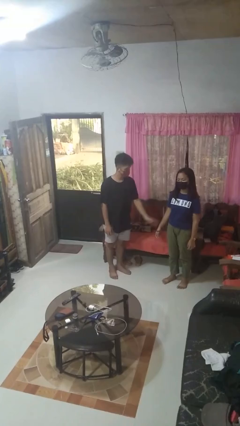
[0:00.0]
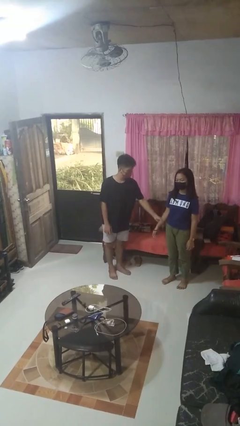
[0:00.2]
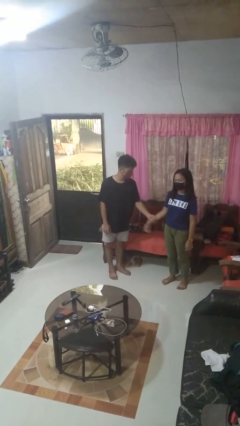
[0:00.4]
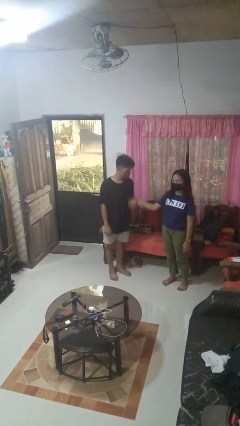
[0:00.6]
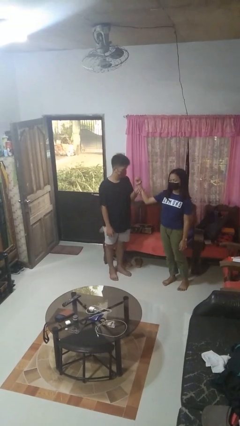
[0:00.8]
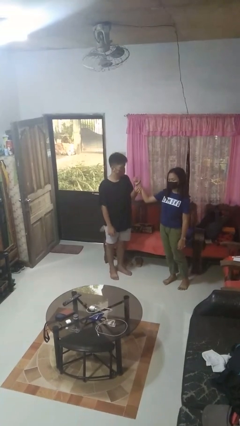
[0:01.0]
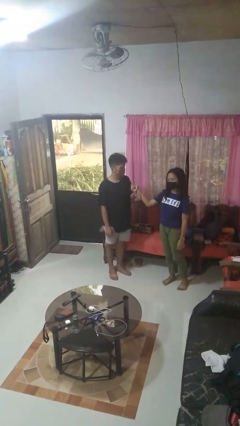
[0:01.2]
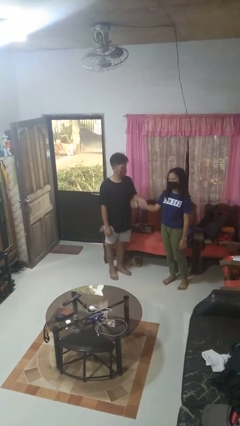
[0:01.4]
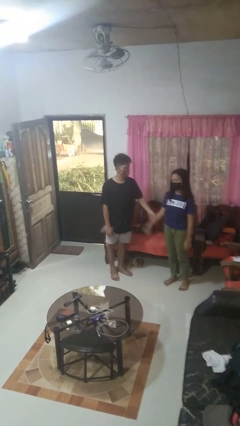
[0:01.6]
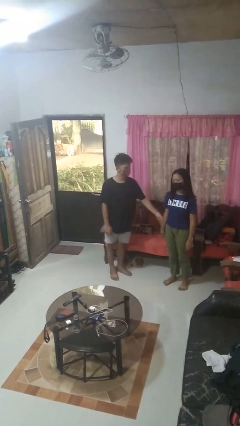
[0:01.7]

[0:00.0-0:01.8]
person grabs person by forearm

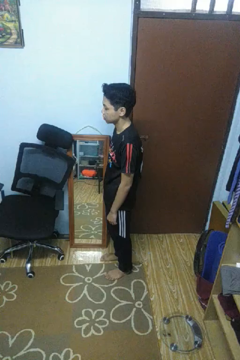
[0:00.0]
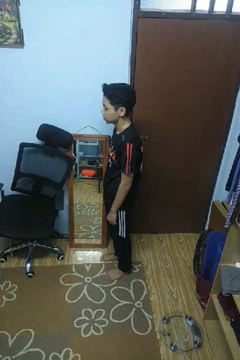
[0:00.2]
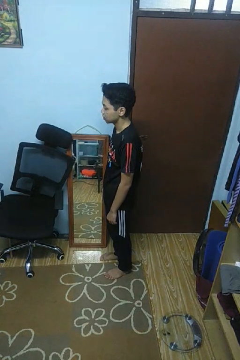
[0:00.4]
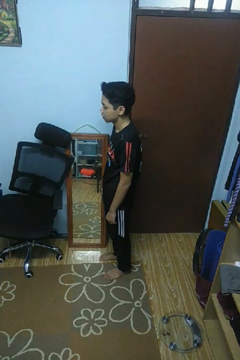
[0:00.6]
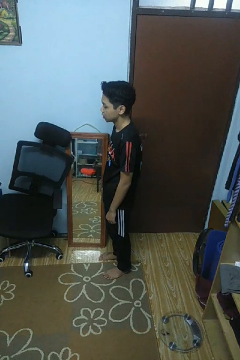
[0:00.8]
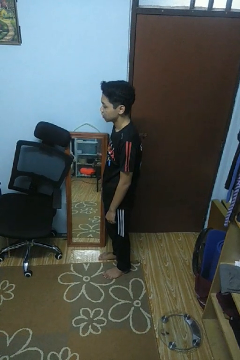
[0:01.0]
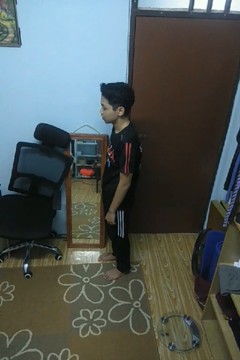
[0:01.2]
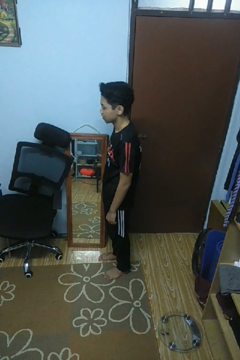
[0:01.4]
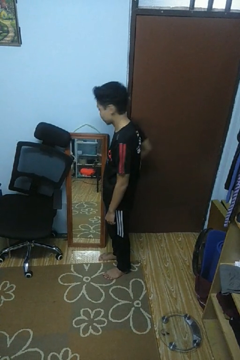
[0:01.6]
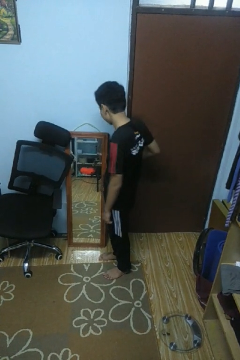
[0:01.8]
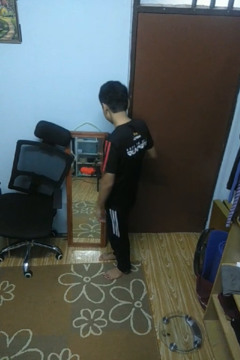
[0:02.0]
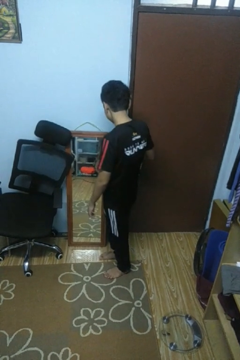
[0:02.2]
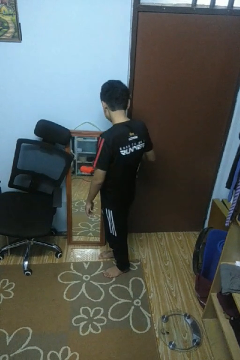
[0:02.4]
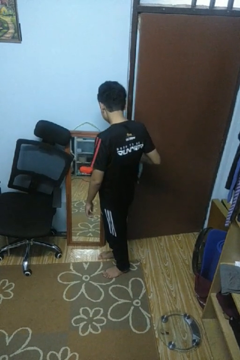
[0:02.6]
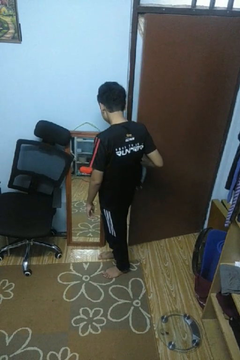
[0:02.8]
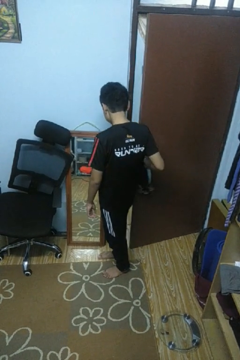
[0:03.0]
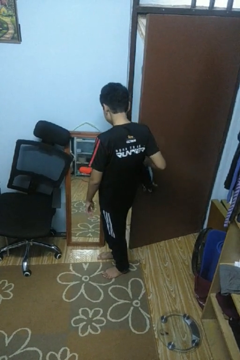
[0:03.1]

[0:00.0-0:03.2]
person opens facility door

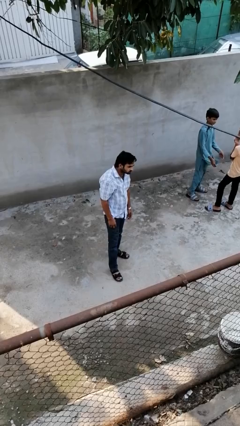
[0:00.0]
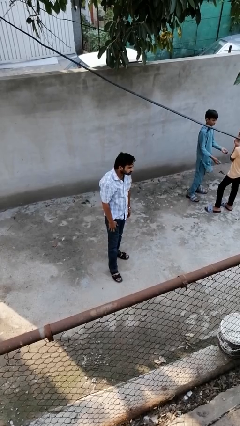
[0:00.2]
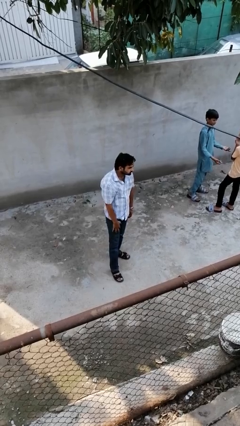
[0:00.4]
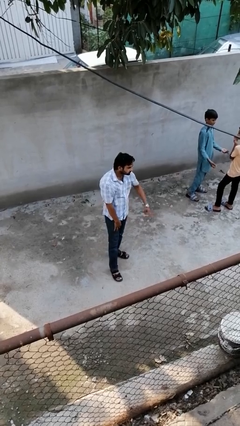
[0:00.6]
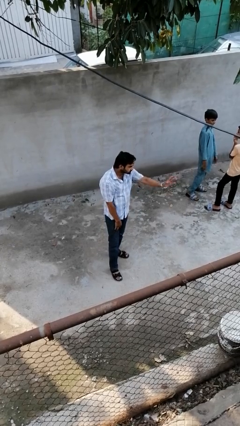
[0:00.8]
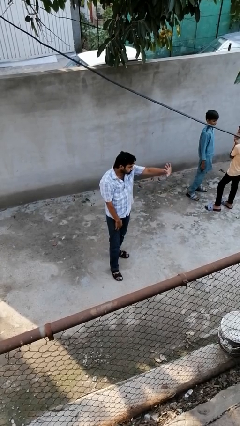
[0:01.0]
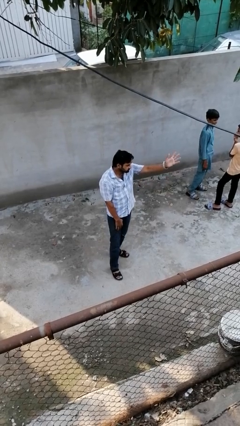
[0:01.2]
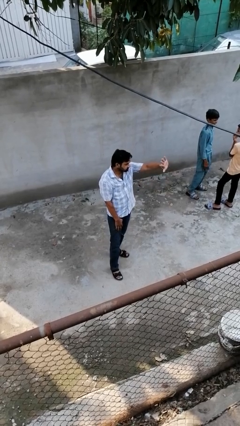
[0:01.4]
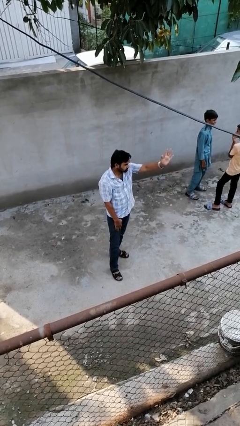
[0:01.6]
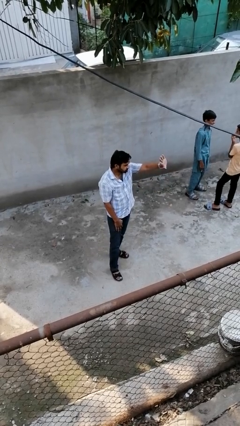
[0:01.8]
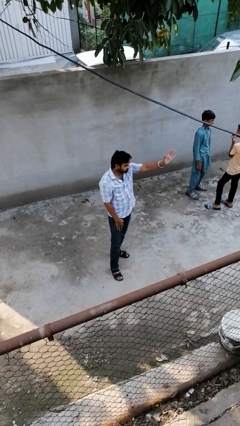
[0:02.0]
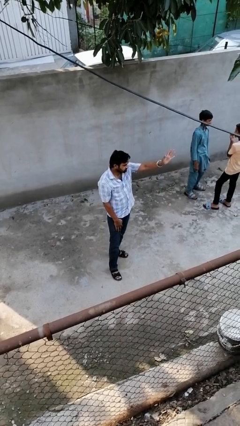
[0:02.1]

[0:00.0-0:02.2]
person waves at person

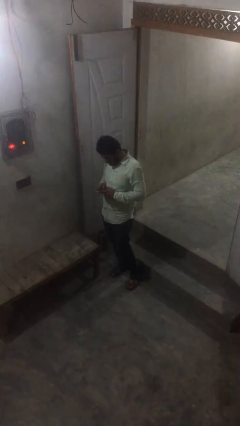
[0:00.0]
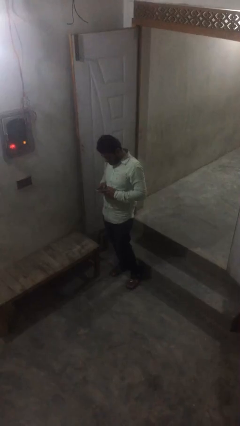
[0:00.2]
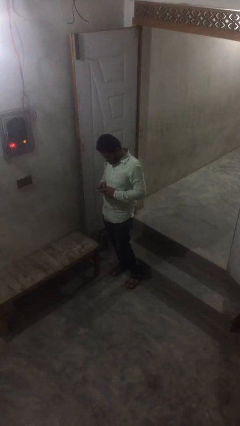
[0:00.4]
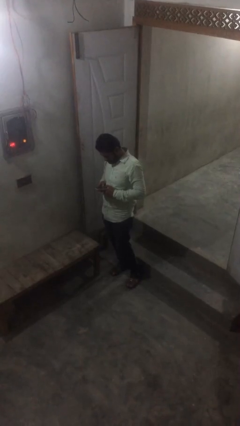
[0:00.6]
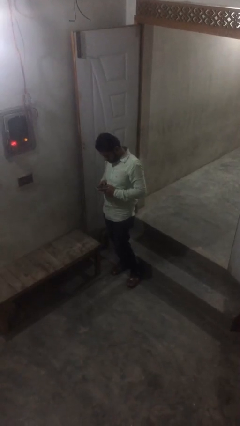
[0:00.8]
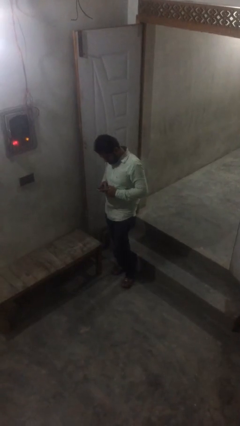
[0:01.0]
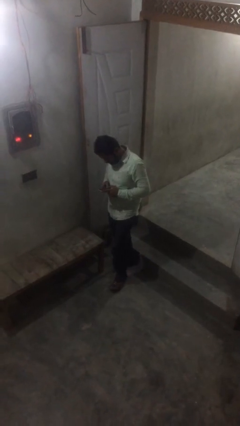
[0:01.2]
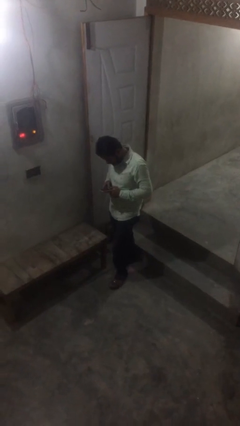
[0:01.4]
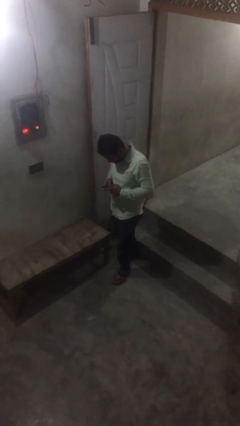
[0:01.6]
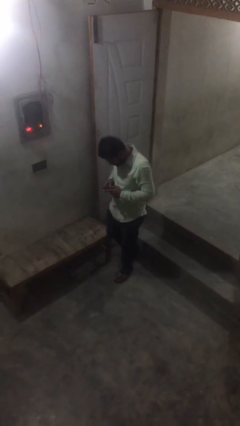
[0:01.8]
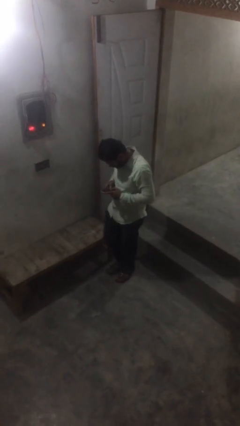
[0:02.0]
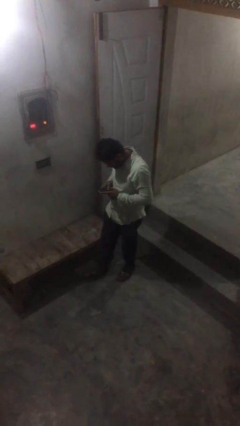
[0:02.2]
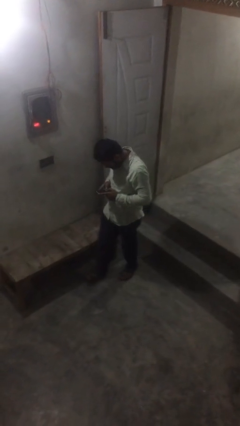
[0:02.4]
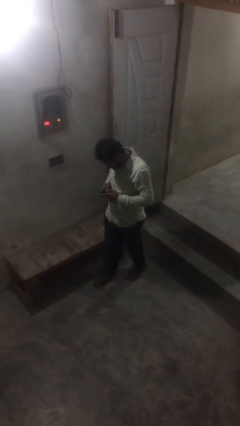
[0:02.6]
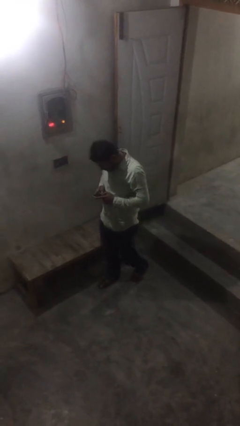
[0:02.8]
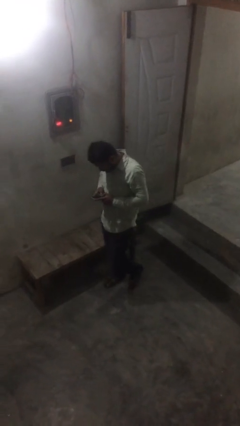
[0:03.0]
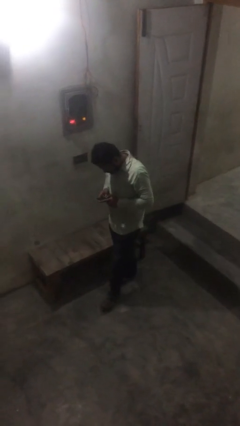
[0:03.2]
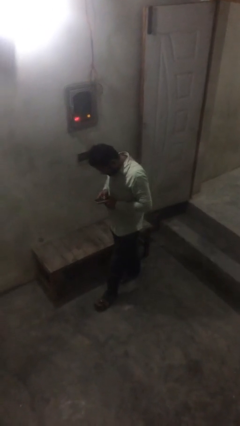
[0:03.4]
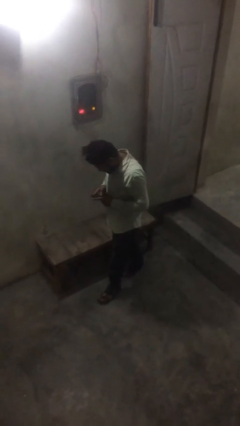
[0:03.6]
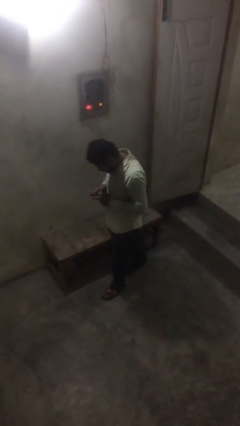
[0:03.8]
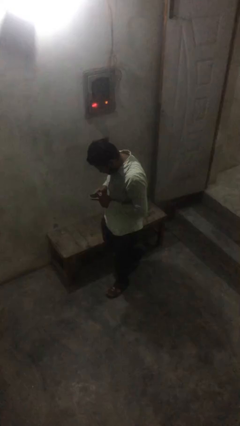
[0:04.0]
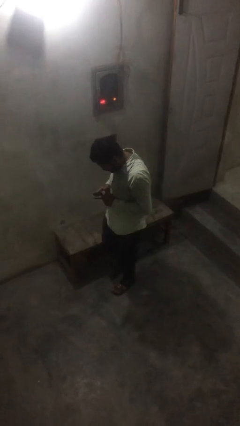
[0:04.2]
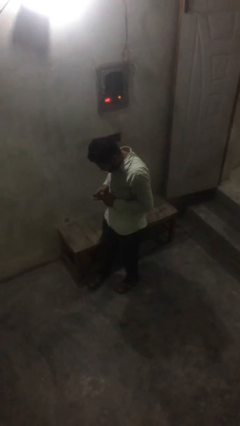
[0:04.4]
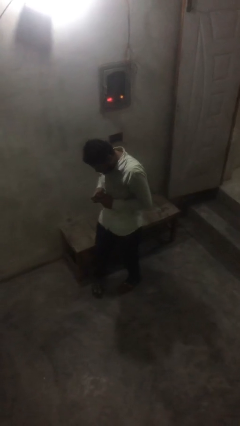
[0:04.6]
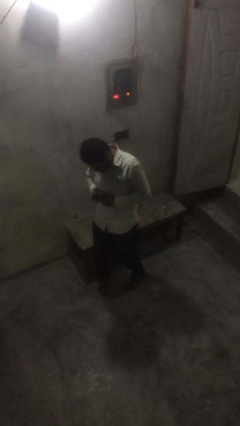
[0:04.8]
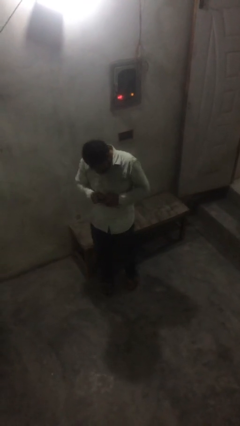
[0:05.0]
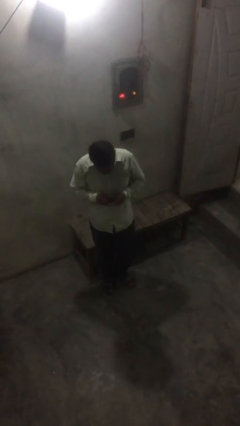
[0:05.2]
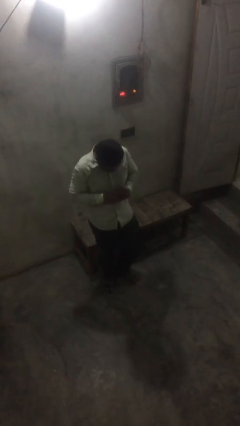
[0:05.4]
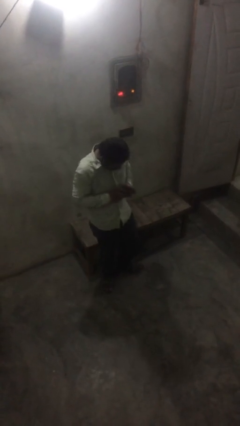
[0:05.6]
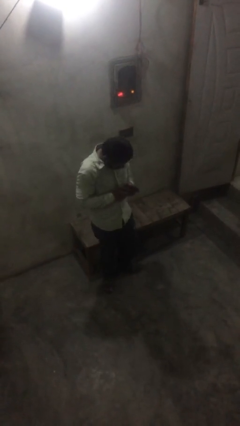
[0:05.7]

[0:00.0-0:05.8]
person texts on phone

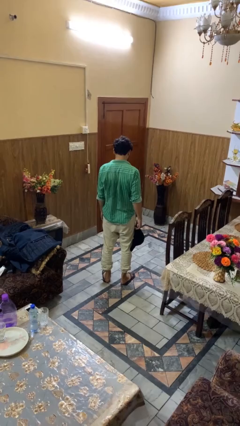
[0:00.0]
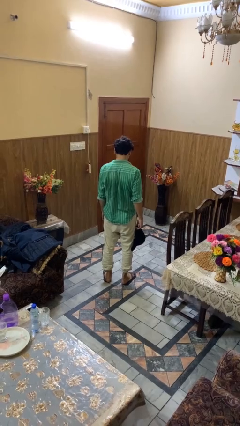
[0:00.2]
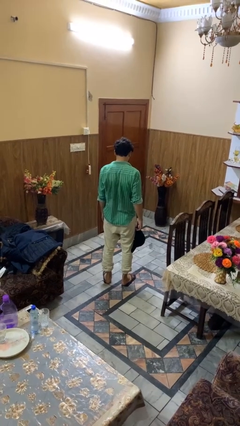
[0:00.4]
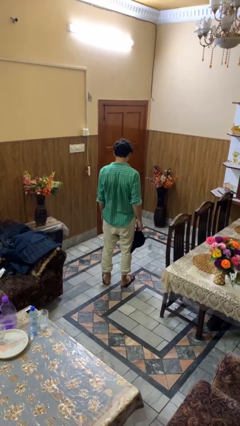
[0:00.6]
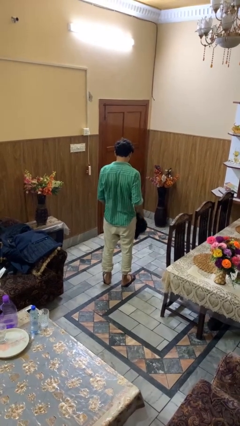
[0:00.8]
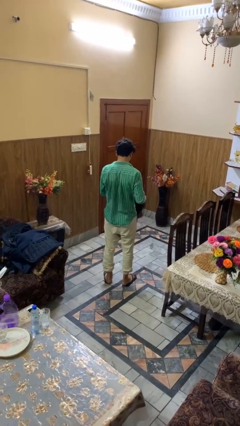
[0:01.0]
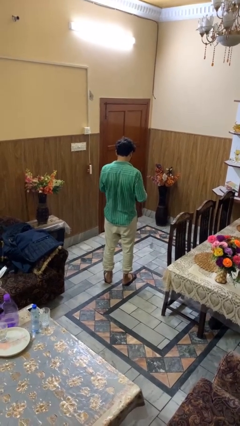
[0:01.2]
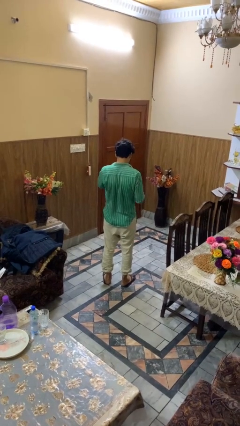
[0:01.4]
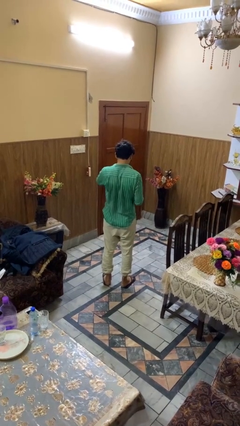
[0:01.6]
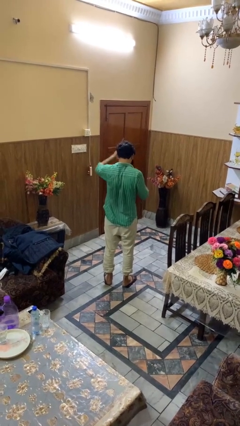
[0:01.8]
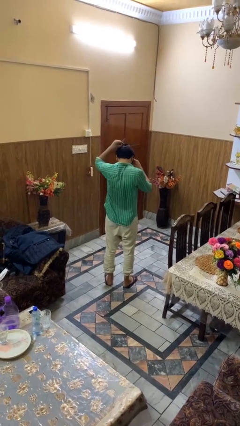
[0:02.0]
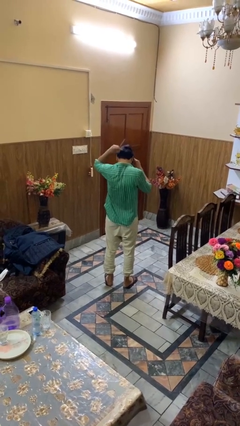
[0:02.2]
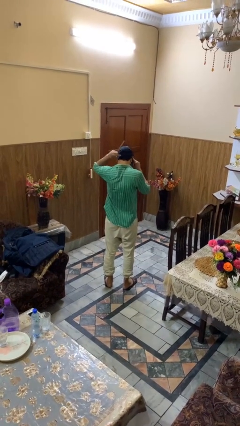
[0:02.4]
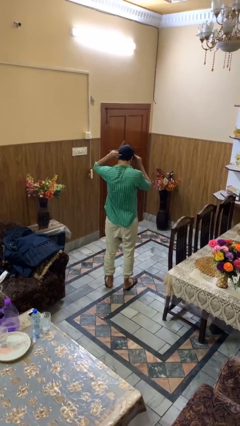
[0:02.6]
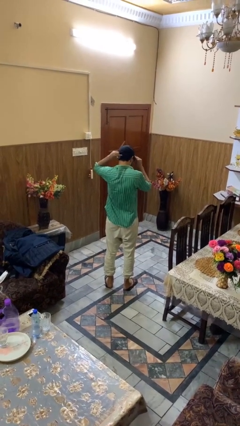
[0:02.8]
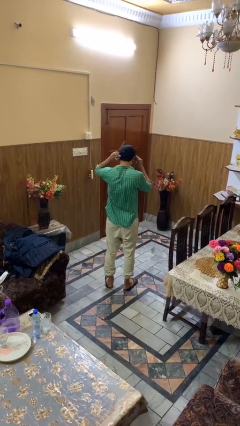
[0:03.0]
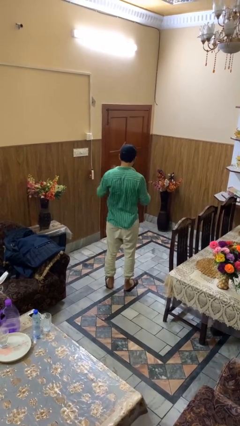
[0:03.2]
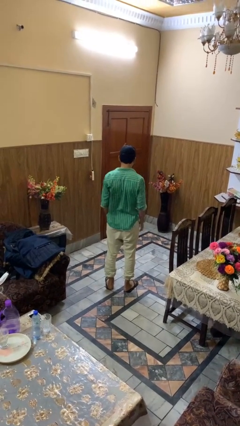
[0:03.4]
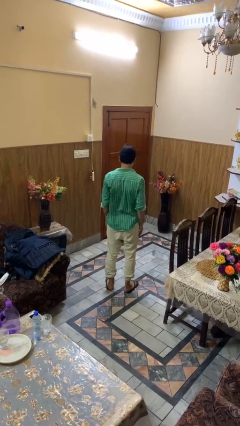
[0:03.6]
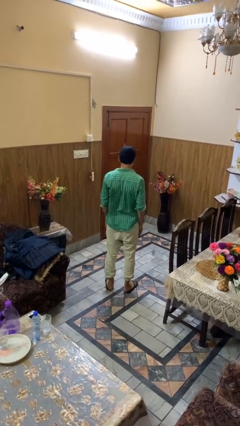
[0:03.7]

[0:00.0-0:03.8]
person puts on hat

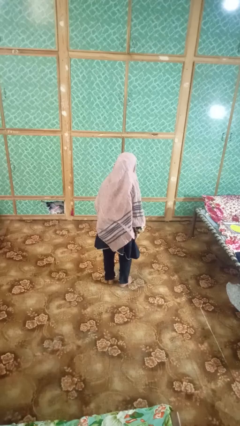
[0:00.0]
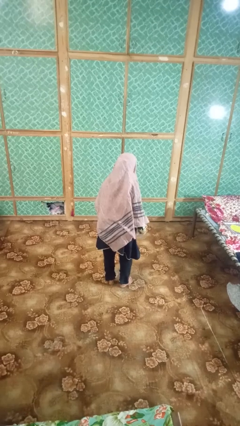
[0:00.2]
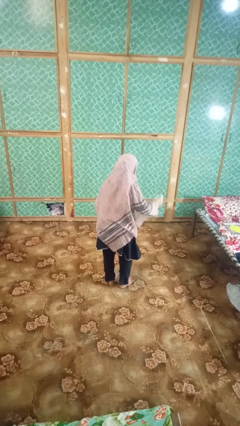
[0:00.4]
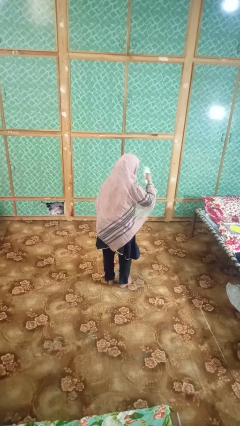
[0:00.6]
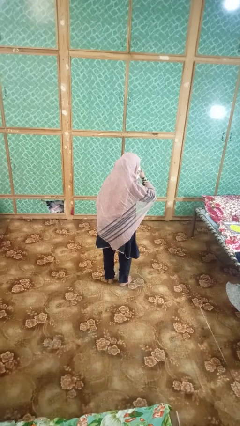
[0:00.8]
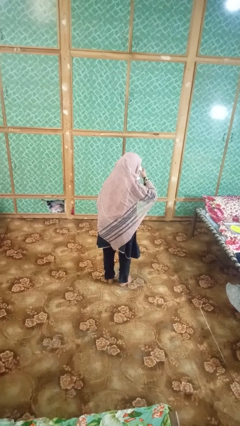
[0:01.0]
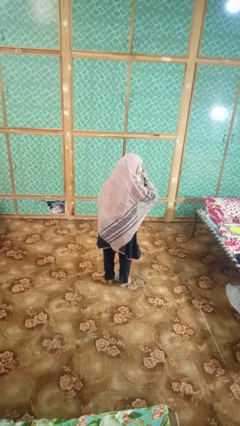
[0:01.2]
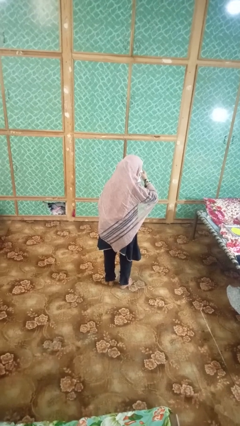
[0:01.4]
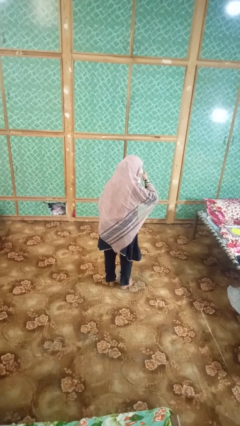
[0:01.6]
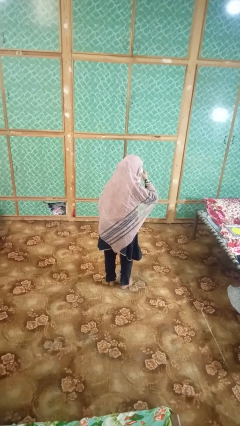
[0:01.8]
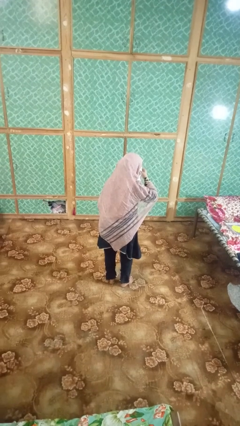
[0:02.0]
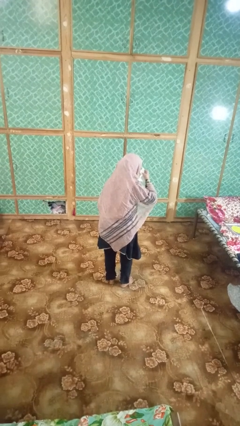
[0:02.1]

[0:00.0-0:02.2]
person blows nose
